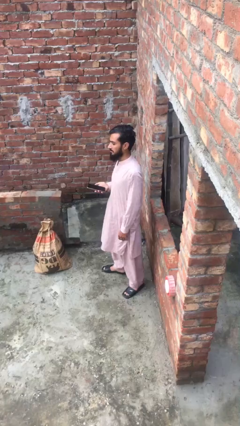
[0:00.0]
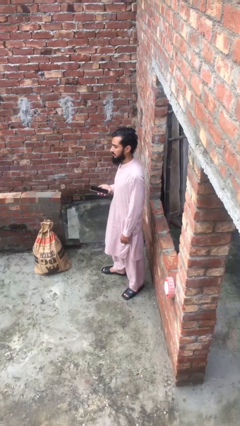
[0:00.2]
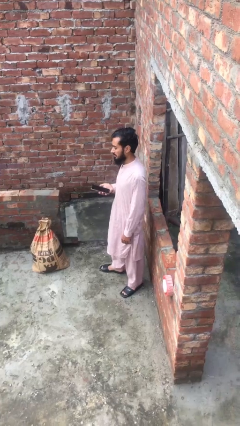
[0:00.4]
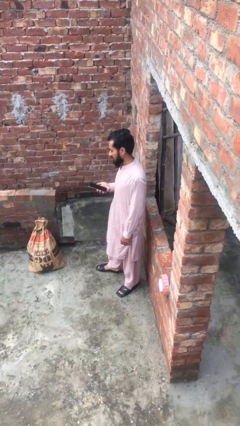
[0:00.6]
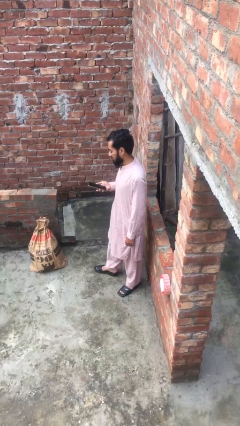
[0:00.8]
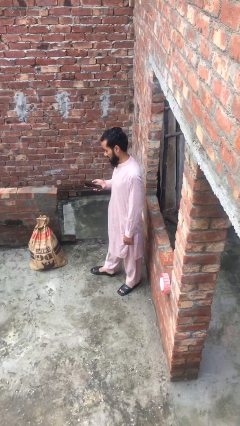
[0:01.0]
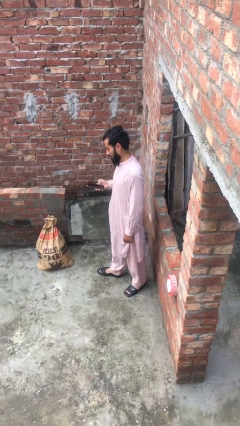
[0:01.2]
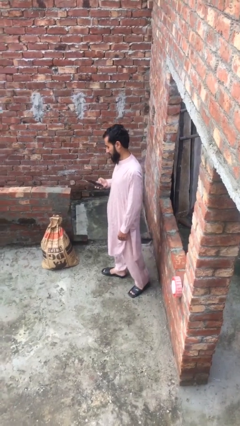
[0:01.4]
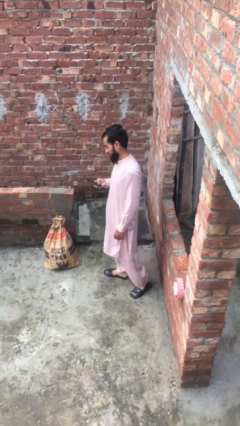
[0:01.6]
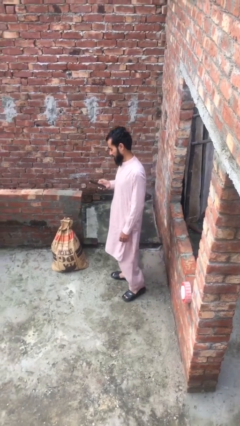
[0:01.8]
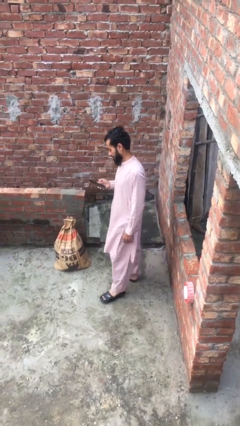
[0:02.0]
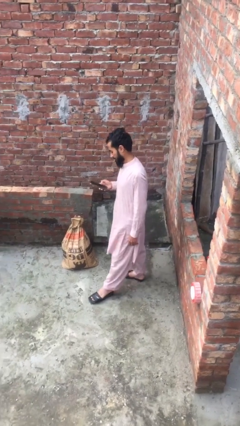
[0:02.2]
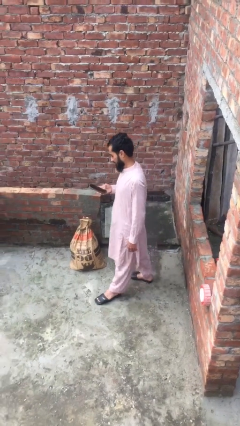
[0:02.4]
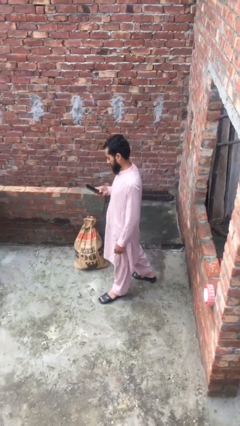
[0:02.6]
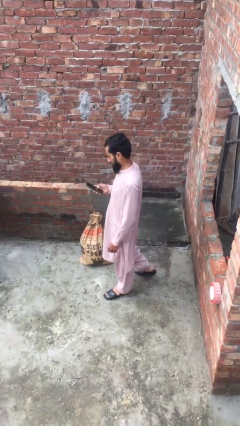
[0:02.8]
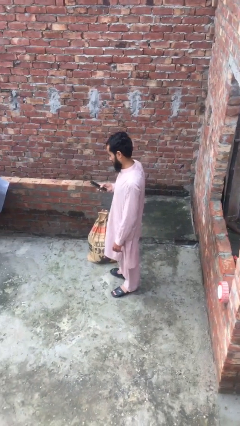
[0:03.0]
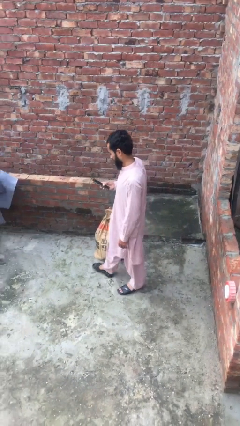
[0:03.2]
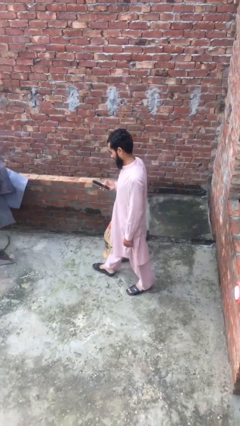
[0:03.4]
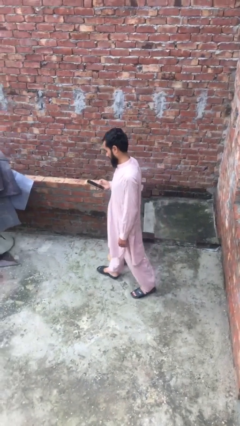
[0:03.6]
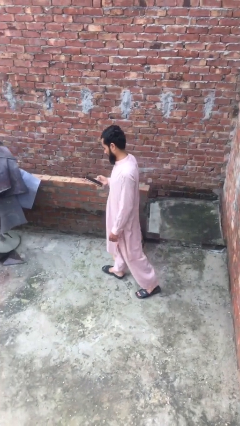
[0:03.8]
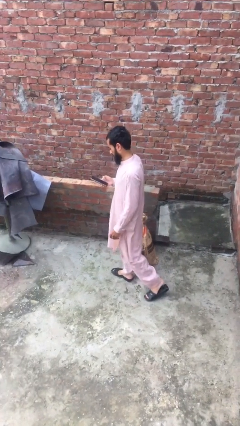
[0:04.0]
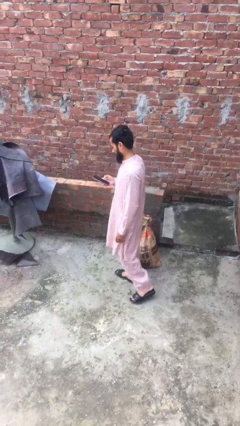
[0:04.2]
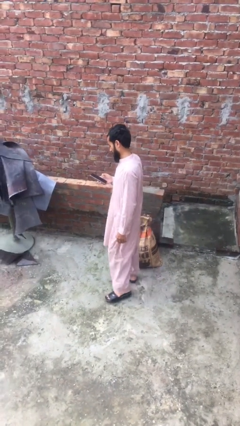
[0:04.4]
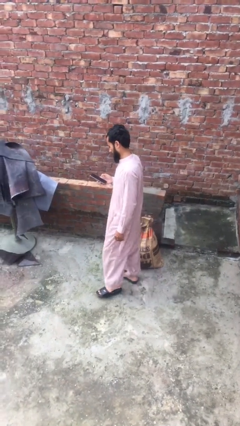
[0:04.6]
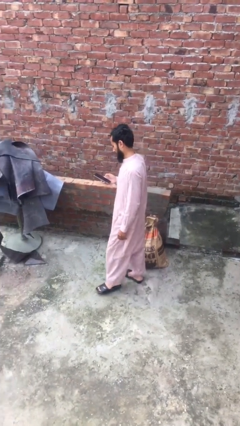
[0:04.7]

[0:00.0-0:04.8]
person texts on phone

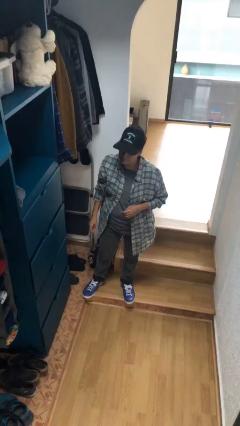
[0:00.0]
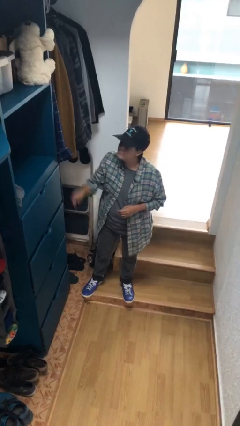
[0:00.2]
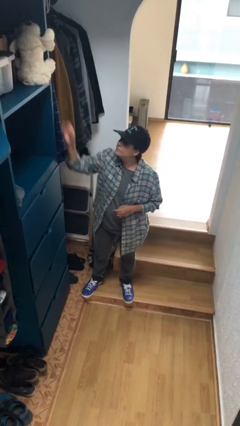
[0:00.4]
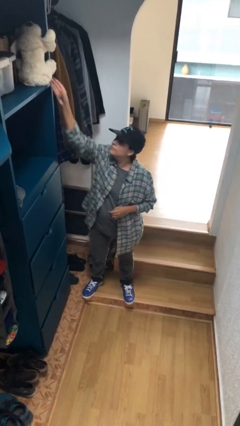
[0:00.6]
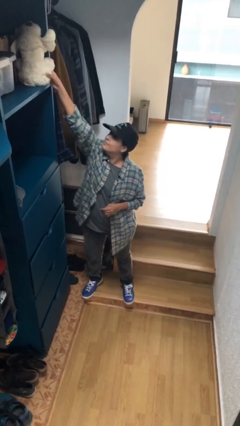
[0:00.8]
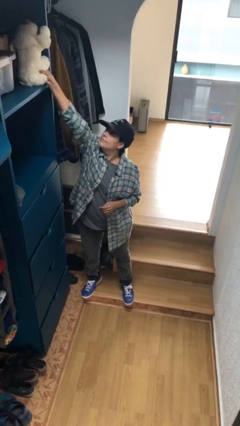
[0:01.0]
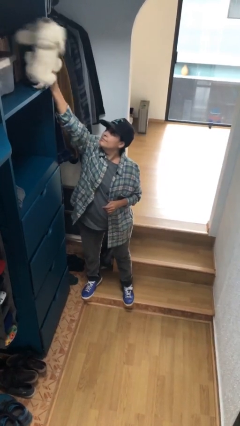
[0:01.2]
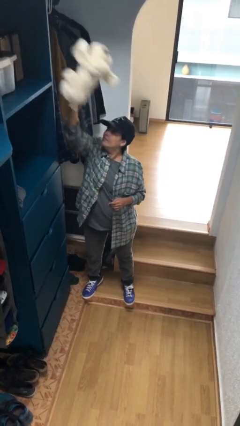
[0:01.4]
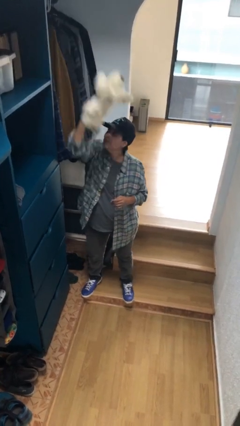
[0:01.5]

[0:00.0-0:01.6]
person picks up object from shelf

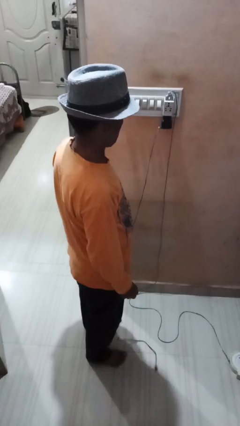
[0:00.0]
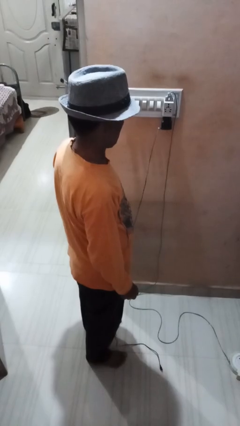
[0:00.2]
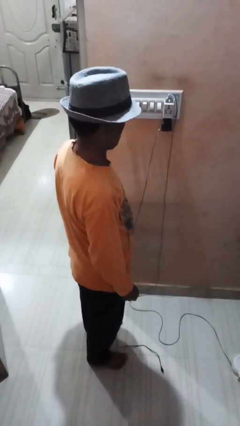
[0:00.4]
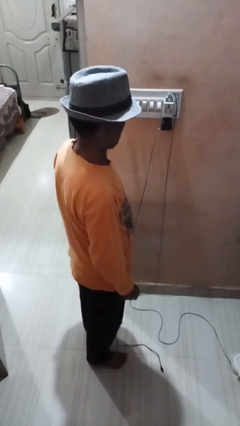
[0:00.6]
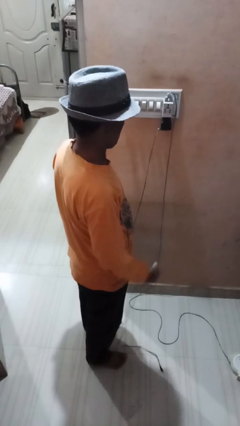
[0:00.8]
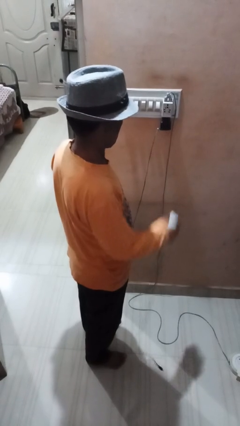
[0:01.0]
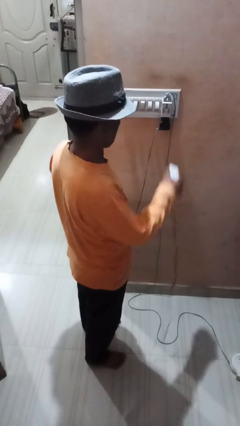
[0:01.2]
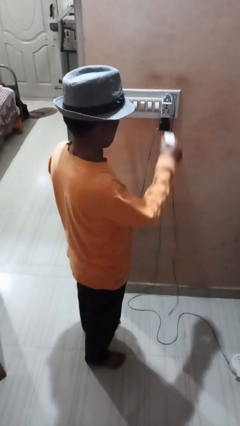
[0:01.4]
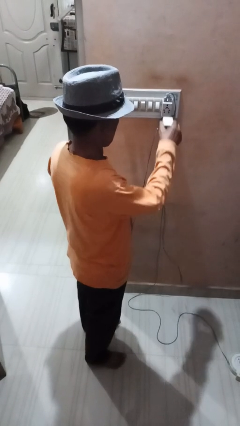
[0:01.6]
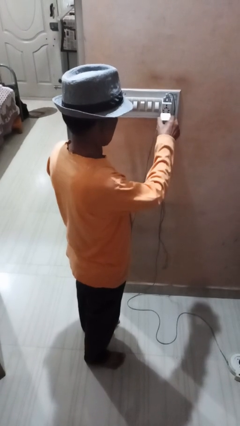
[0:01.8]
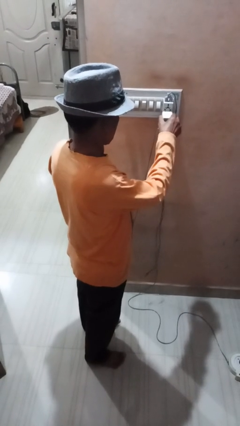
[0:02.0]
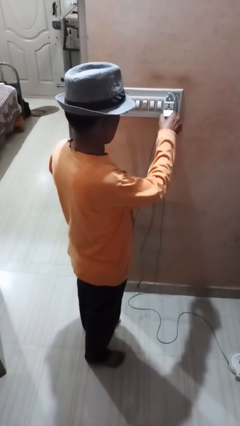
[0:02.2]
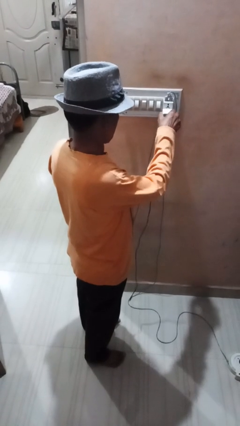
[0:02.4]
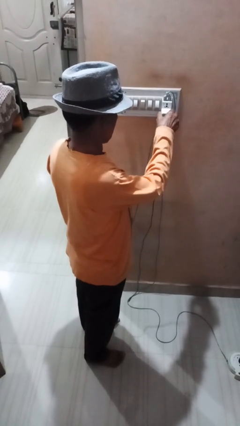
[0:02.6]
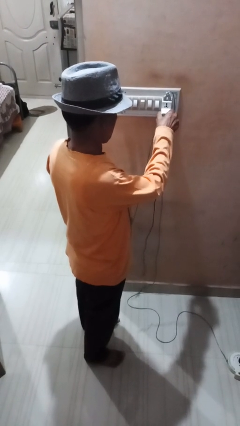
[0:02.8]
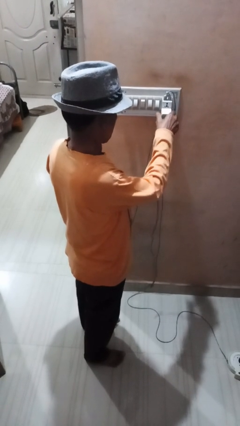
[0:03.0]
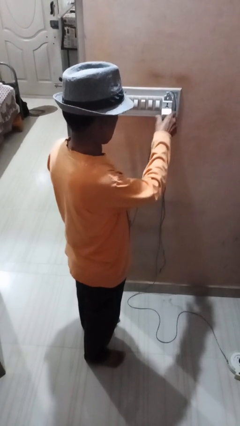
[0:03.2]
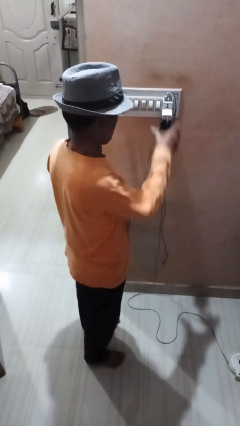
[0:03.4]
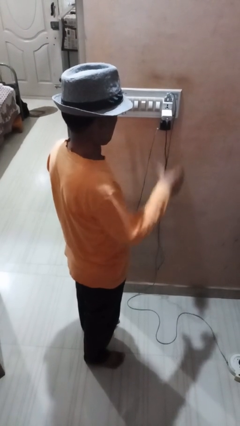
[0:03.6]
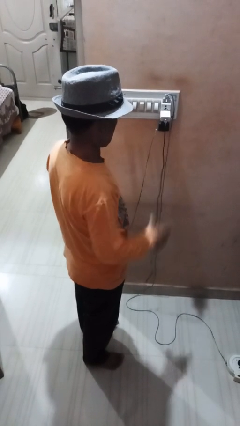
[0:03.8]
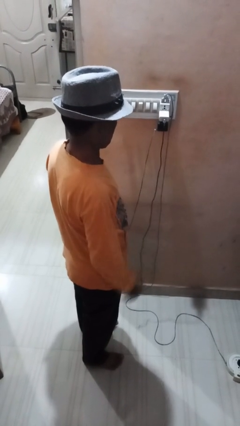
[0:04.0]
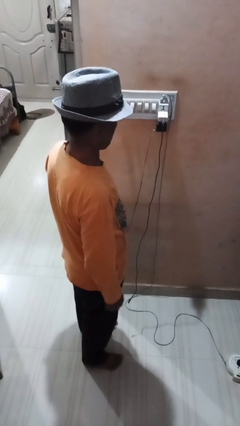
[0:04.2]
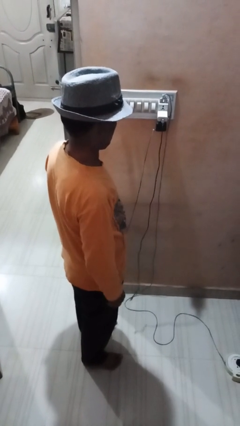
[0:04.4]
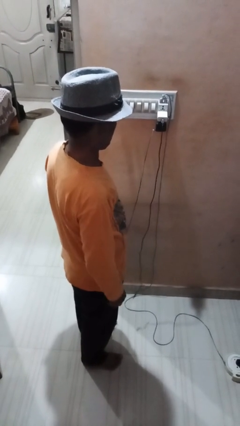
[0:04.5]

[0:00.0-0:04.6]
person plugs into electrical socket

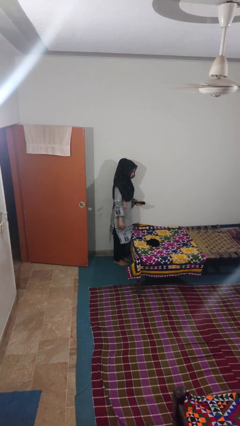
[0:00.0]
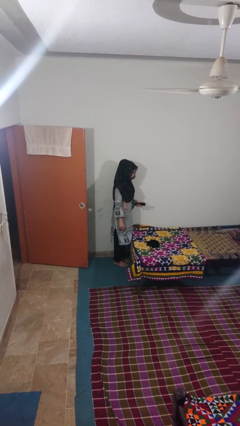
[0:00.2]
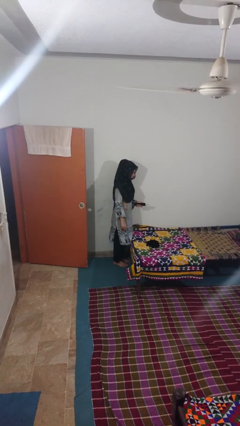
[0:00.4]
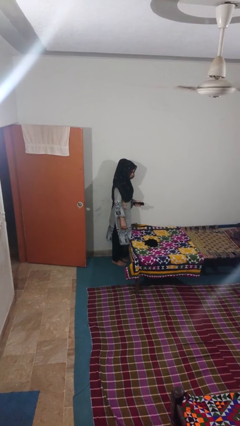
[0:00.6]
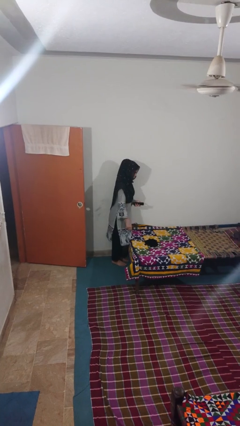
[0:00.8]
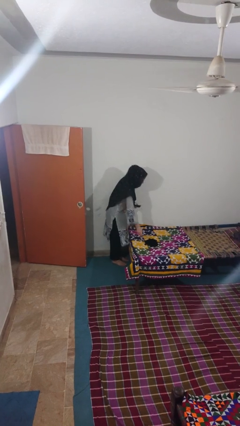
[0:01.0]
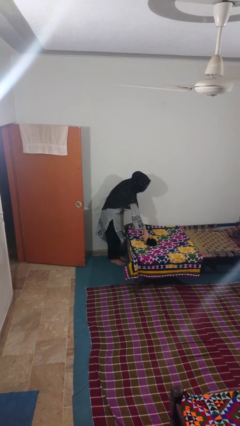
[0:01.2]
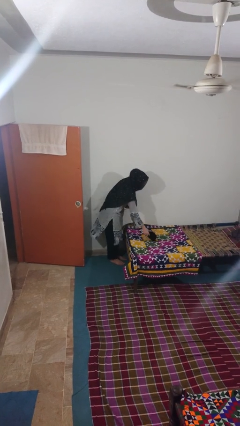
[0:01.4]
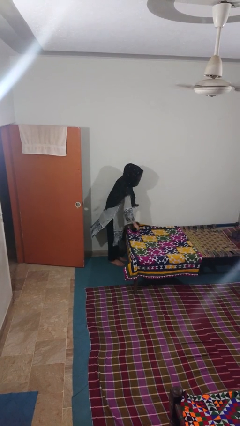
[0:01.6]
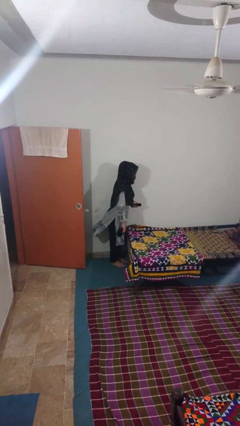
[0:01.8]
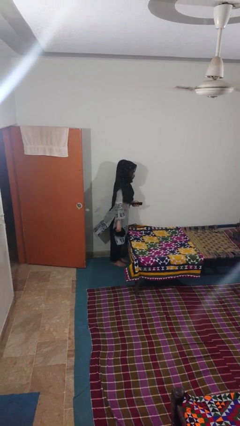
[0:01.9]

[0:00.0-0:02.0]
person picks up object from bed

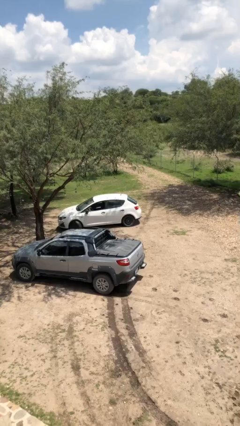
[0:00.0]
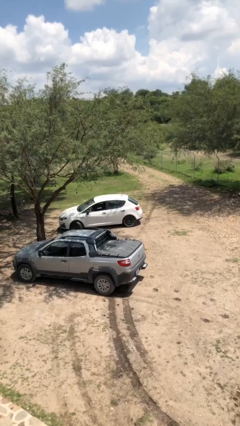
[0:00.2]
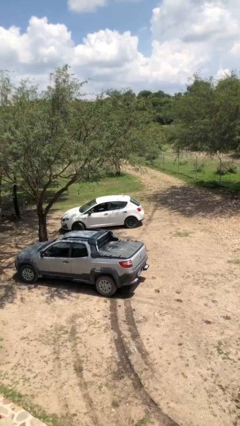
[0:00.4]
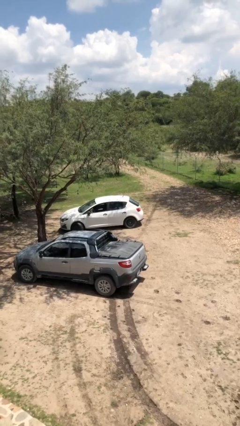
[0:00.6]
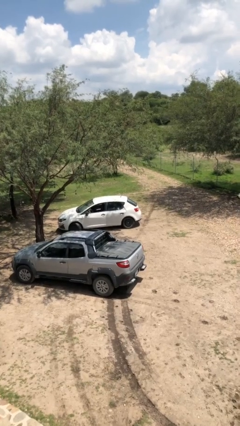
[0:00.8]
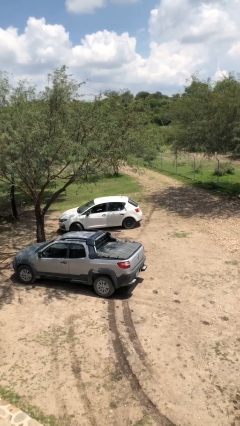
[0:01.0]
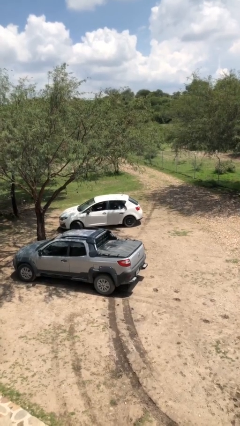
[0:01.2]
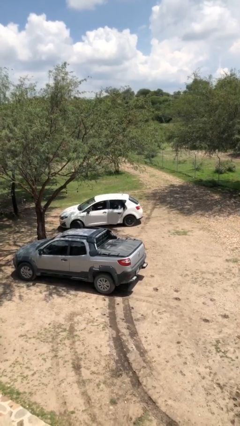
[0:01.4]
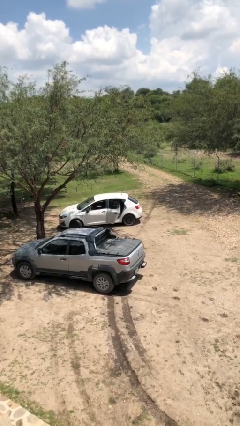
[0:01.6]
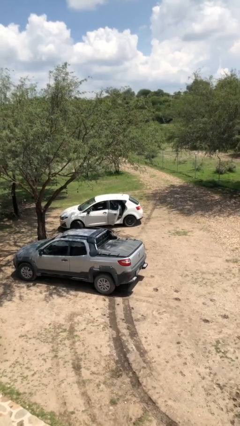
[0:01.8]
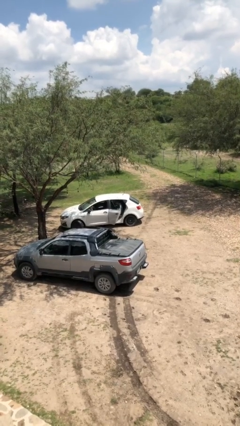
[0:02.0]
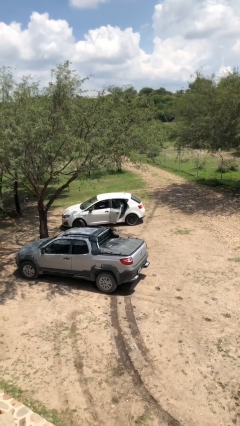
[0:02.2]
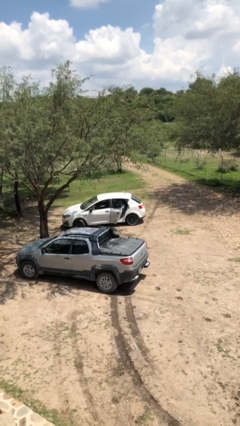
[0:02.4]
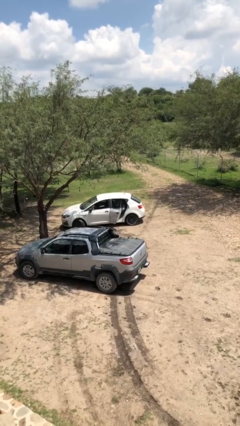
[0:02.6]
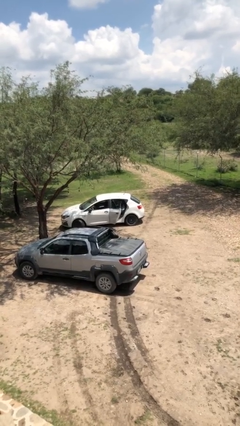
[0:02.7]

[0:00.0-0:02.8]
person opens car door

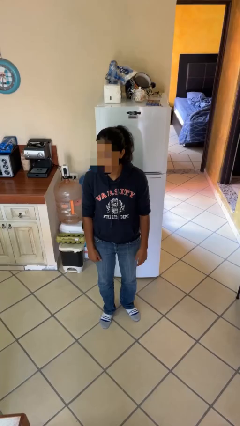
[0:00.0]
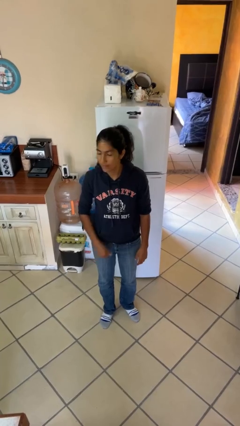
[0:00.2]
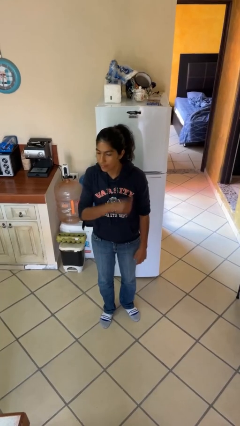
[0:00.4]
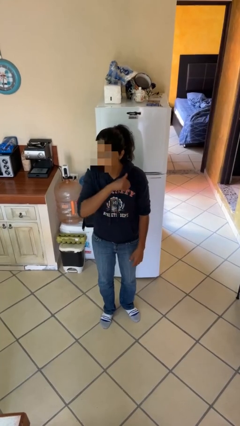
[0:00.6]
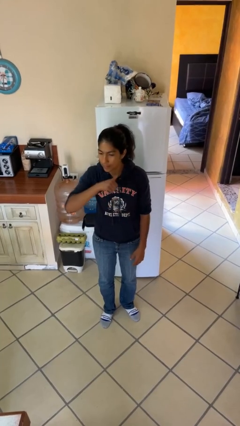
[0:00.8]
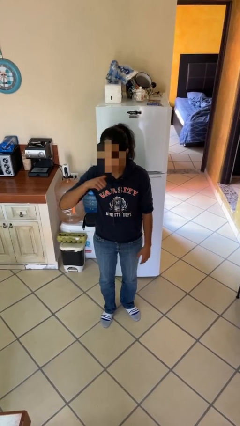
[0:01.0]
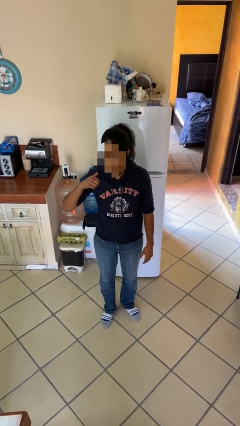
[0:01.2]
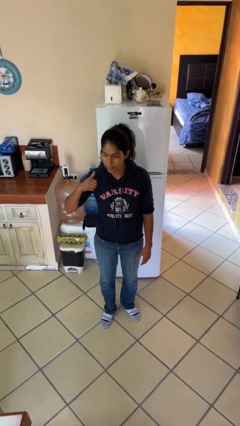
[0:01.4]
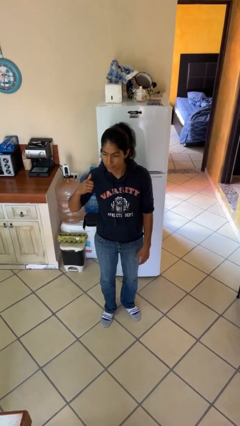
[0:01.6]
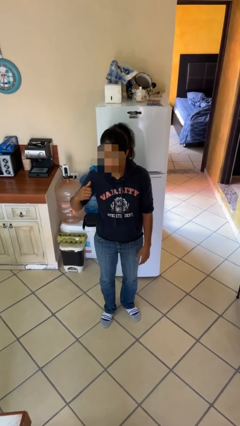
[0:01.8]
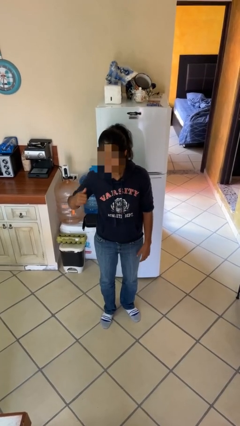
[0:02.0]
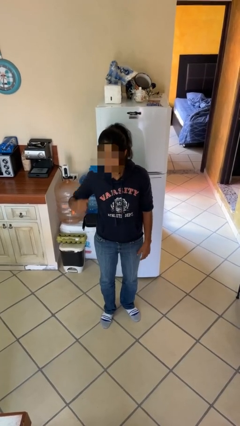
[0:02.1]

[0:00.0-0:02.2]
person gestures cut
